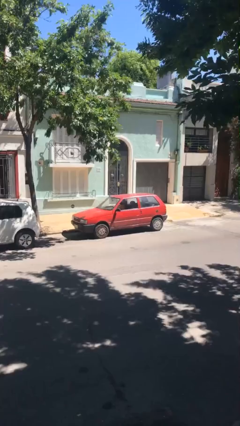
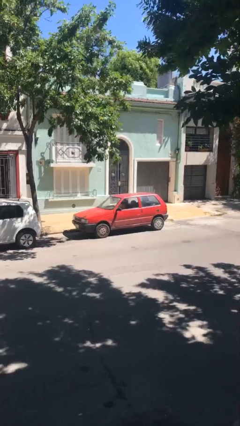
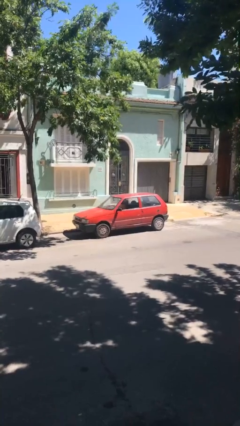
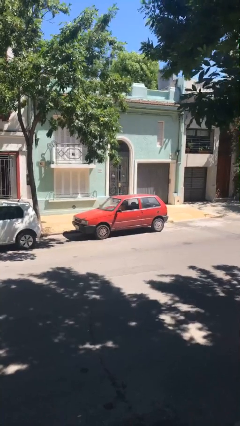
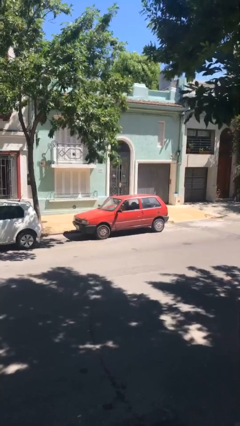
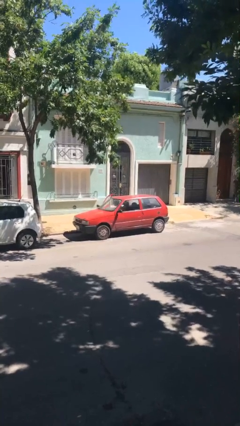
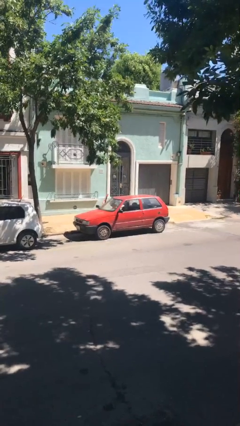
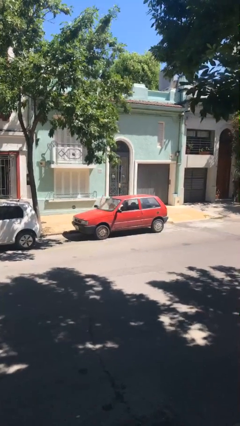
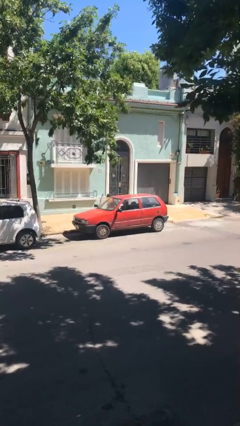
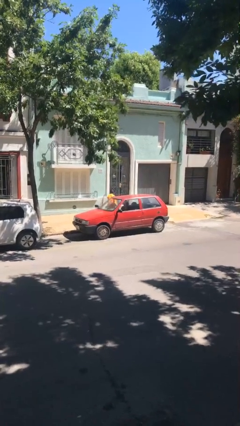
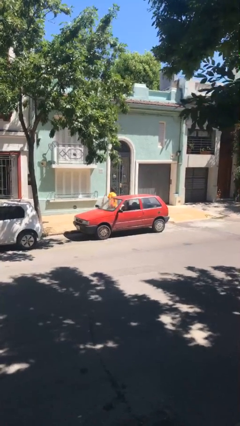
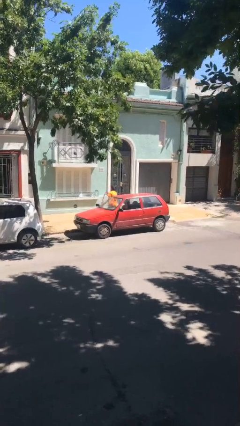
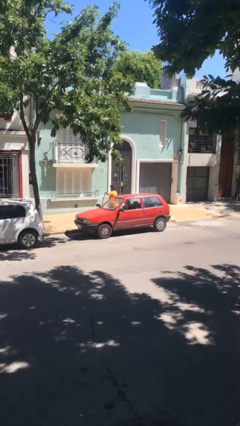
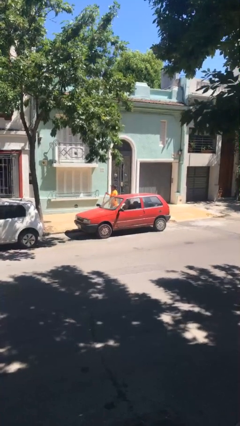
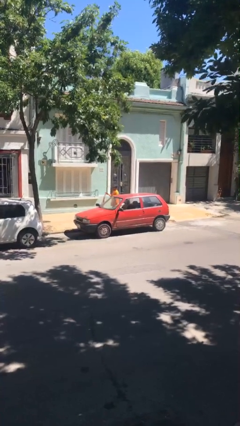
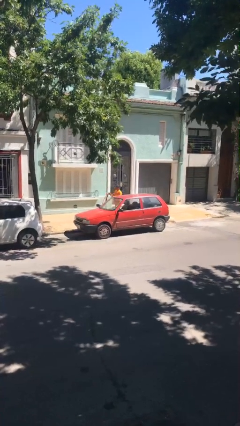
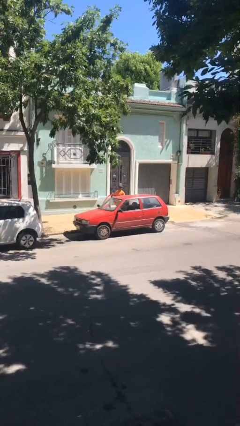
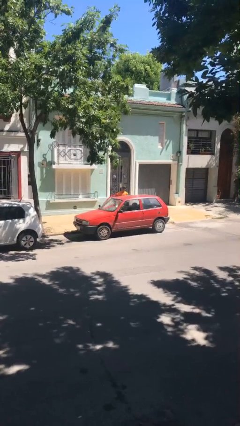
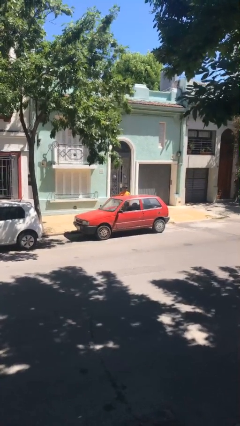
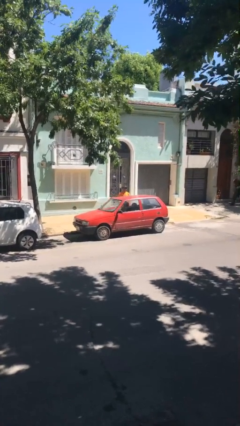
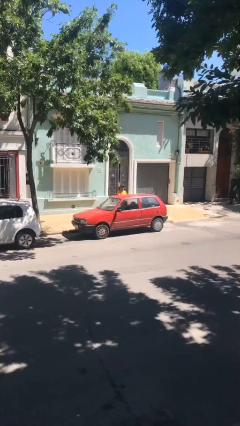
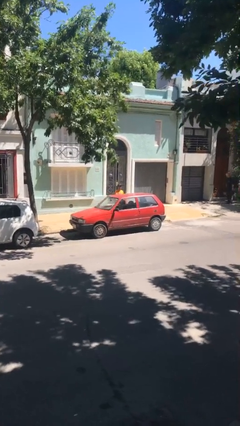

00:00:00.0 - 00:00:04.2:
car drops off person

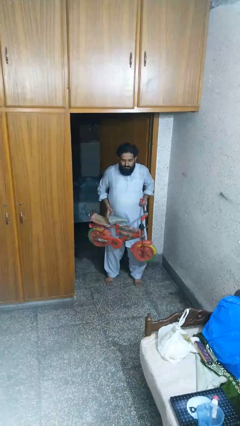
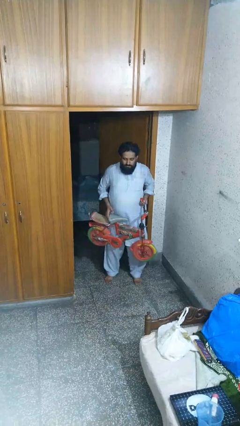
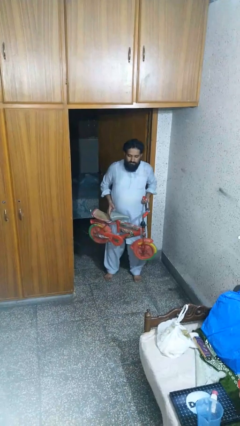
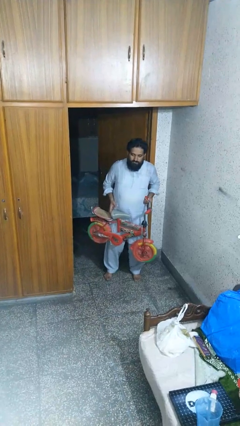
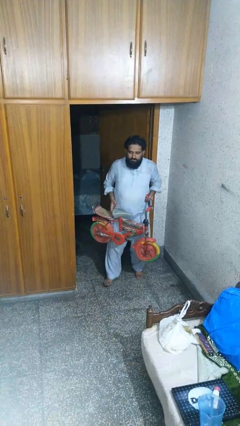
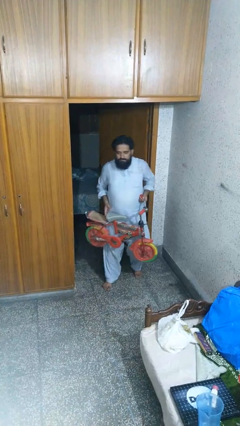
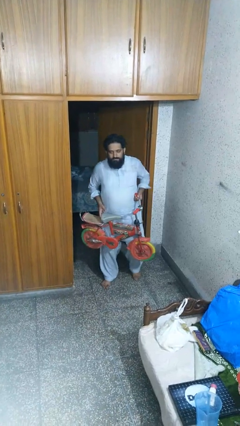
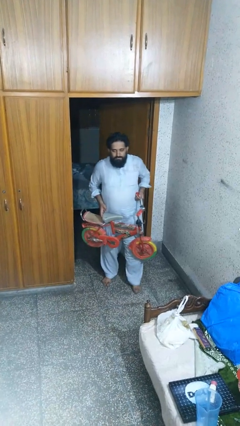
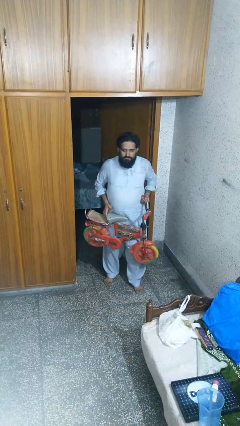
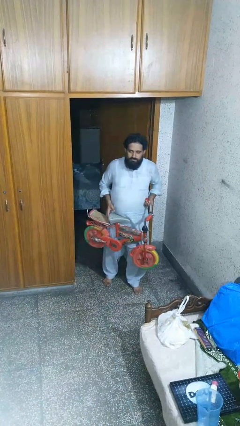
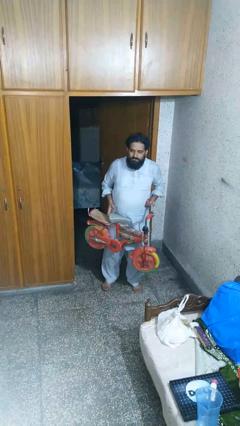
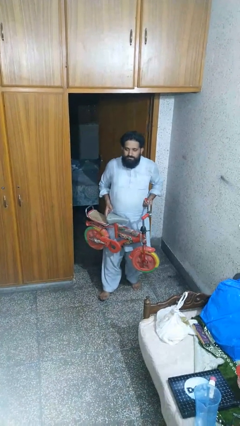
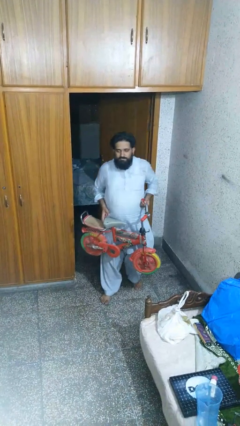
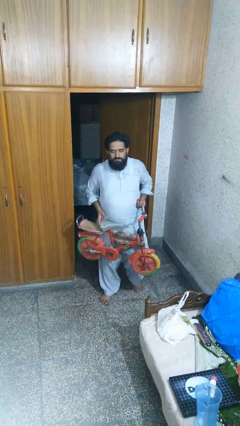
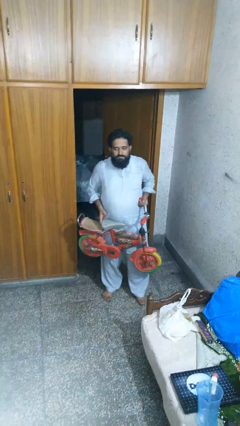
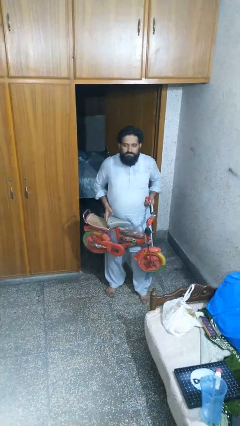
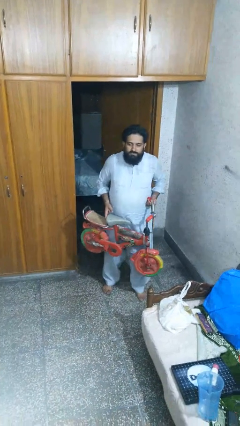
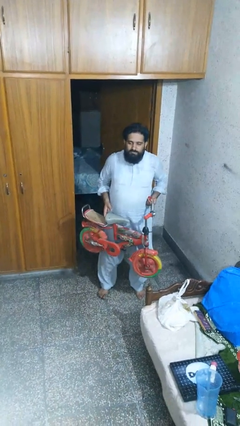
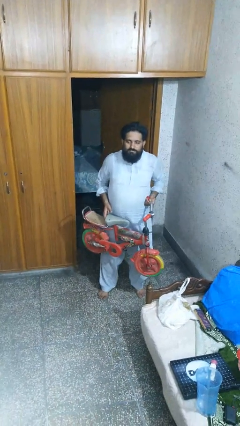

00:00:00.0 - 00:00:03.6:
person carries bicycle

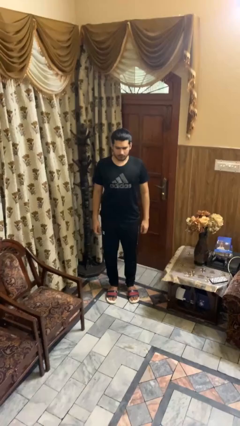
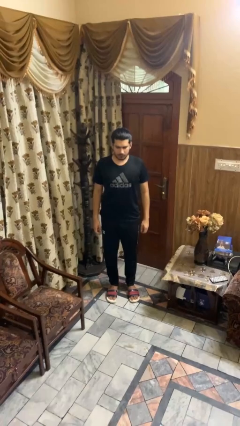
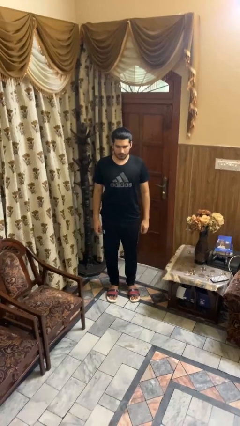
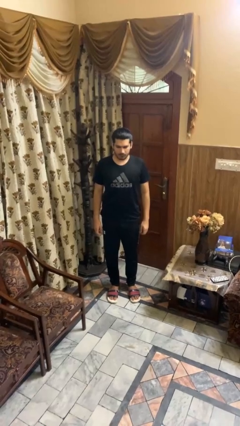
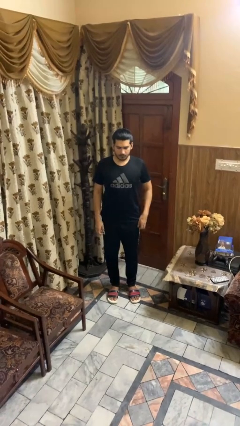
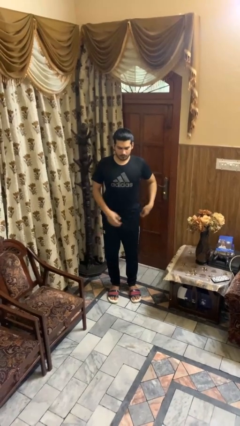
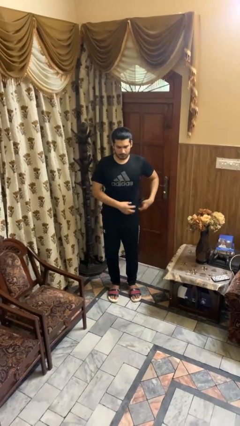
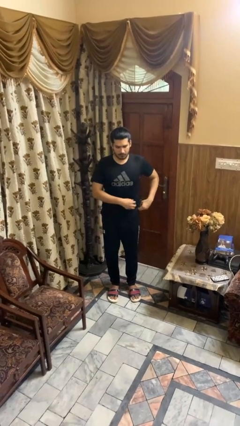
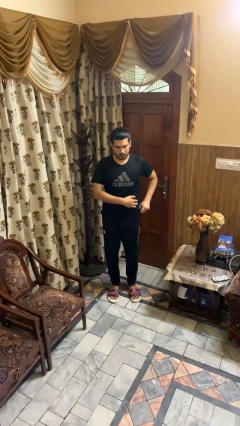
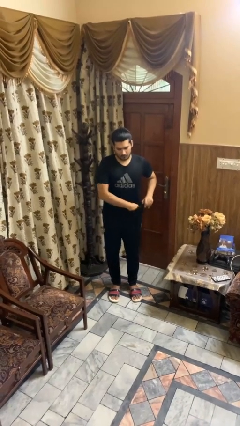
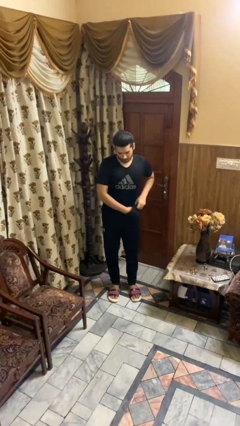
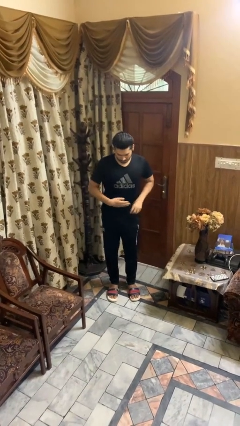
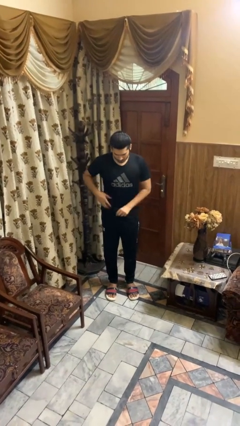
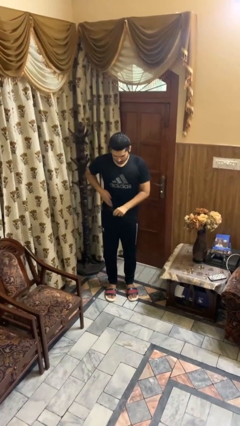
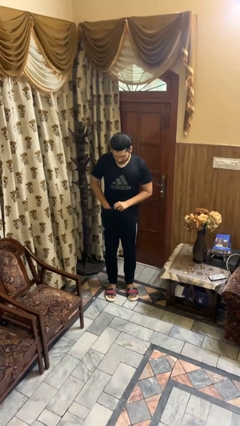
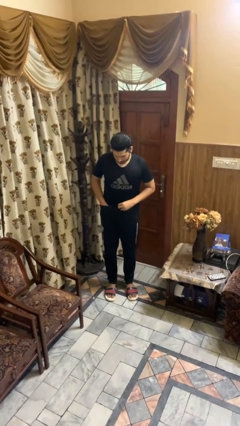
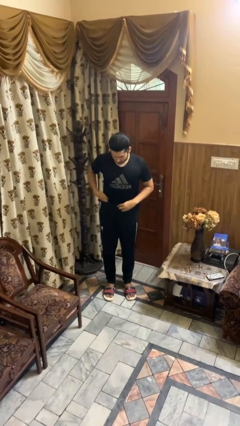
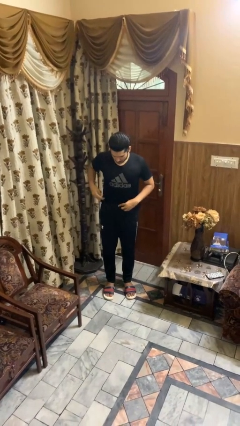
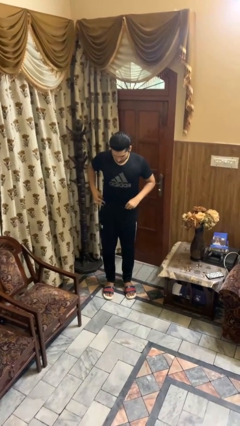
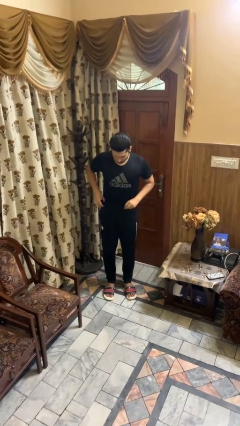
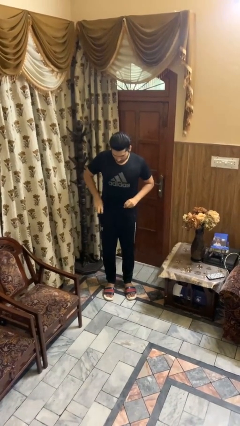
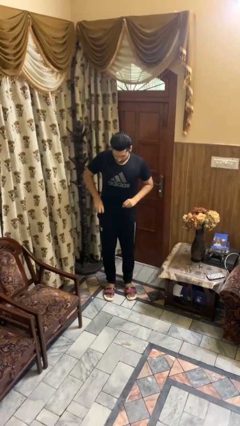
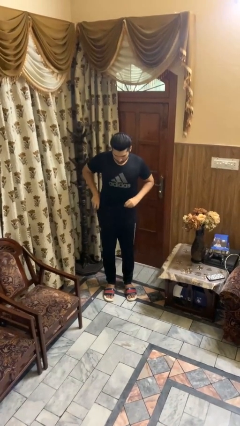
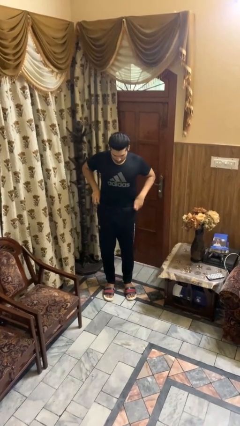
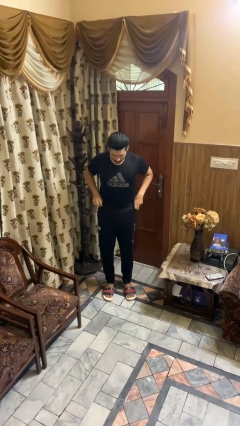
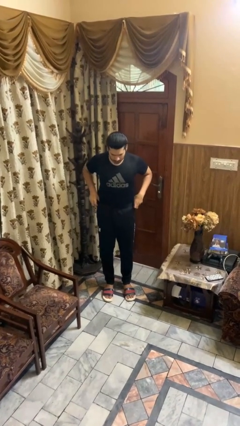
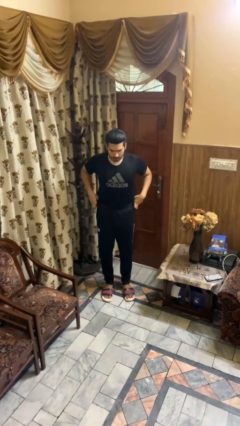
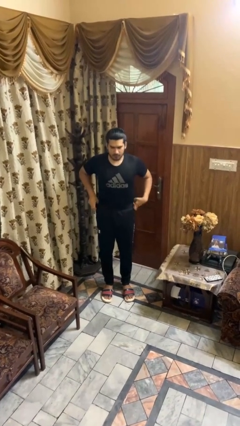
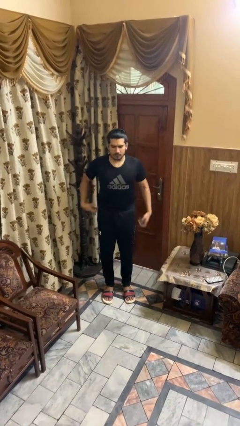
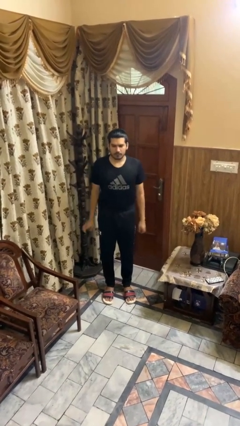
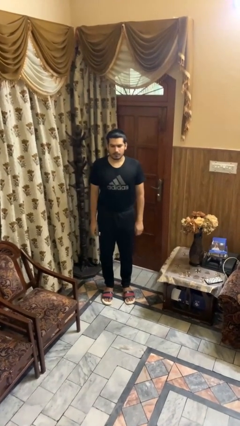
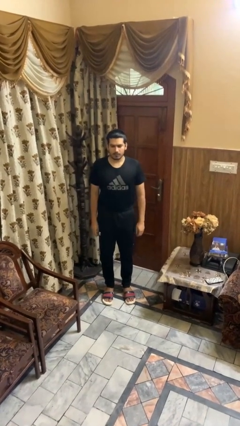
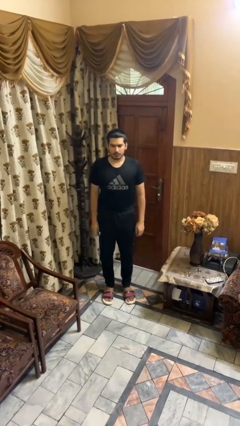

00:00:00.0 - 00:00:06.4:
person tucks in shirt

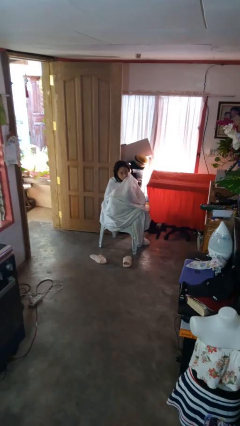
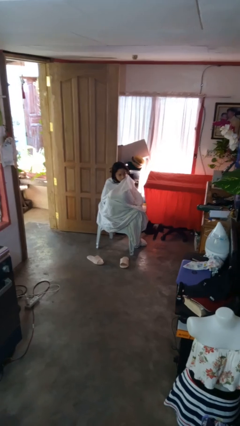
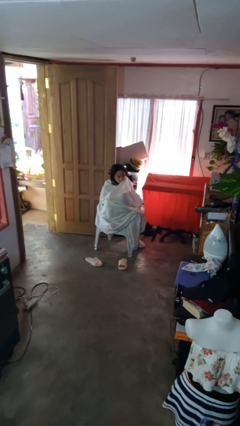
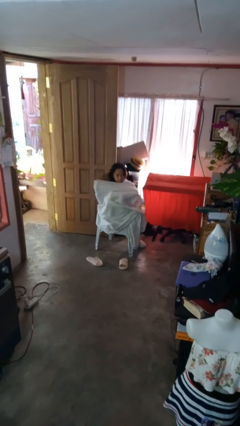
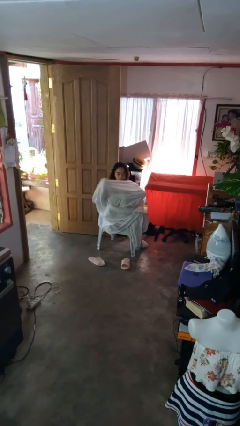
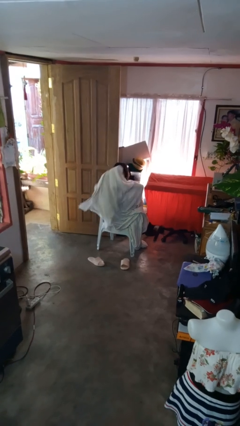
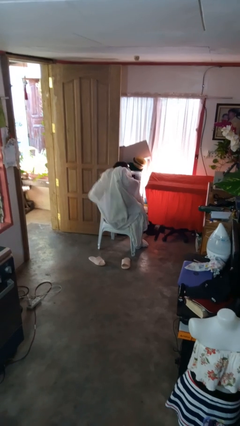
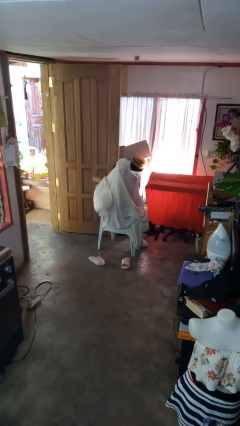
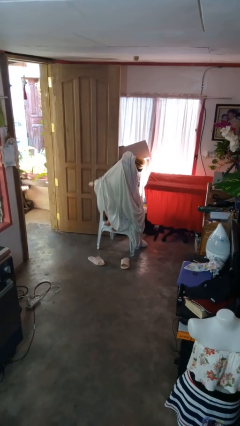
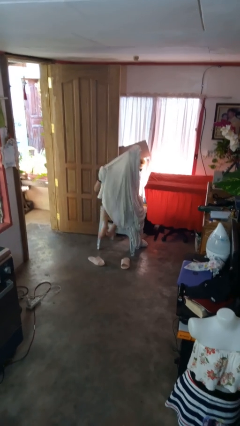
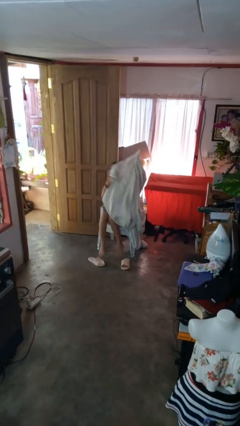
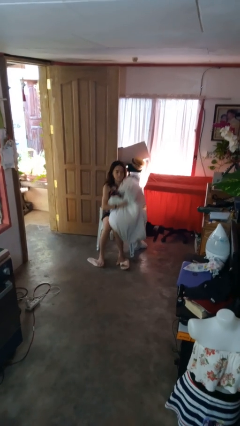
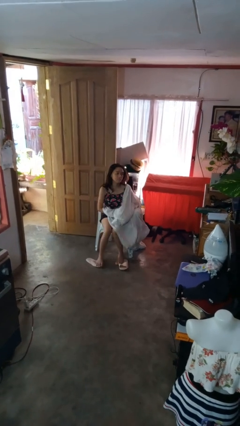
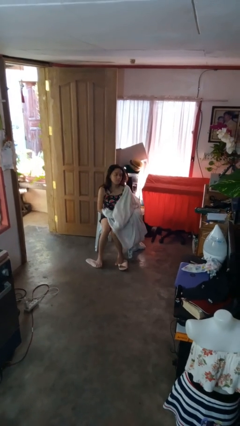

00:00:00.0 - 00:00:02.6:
person uncovers with blanket

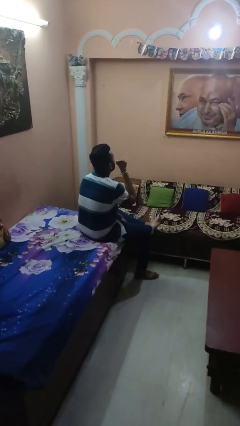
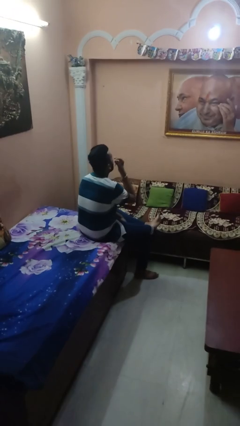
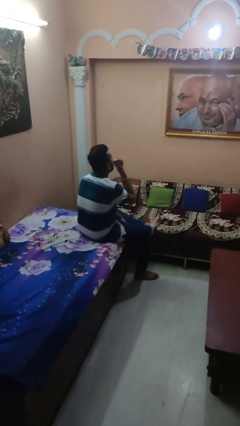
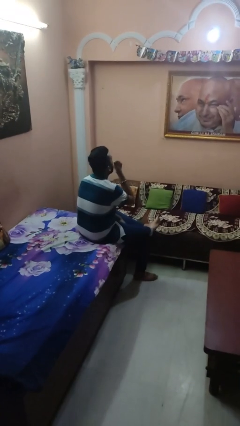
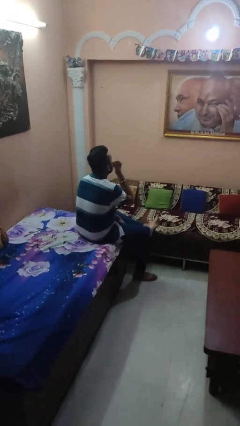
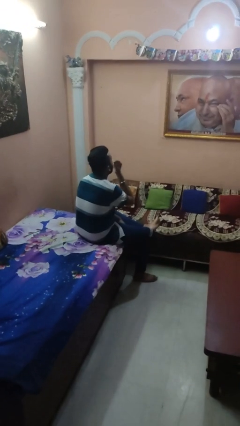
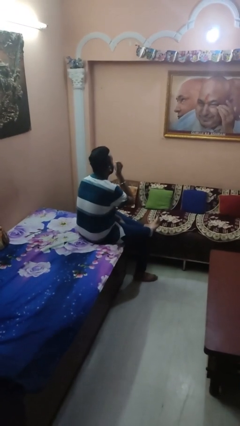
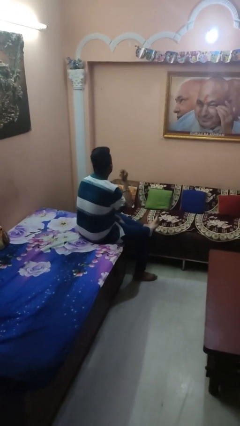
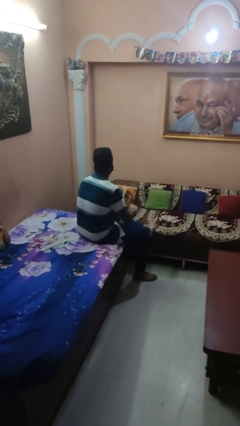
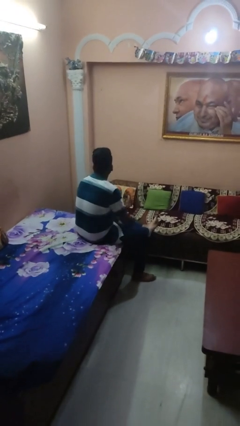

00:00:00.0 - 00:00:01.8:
person yawns
